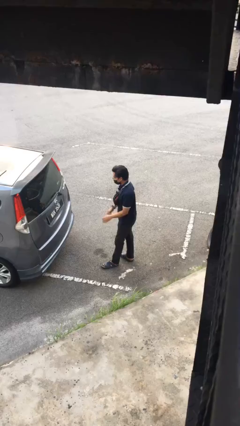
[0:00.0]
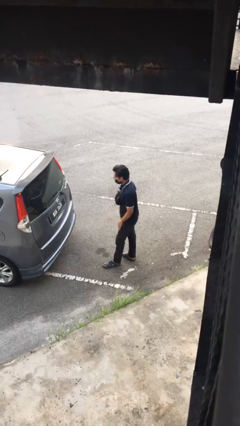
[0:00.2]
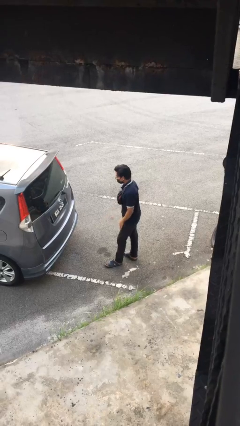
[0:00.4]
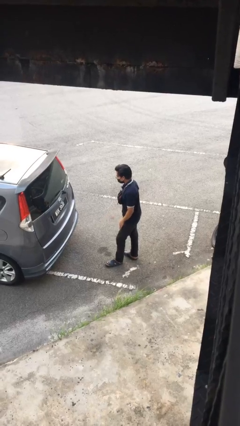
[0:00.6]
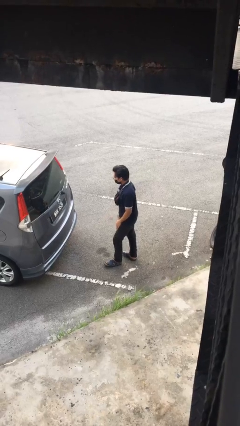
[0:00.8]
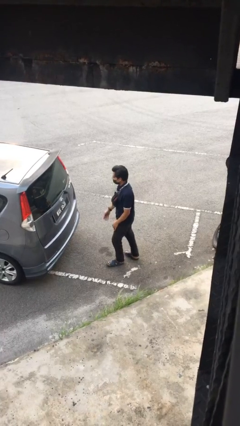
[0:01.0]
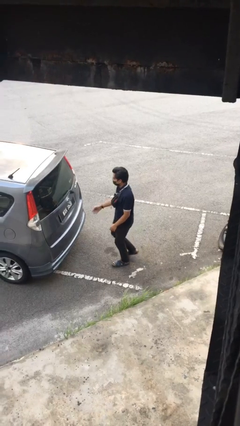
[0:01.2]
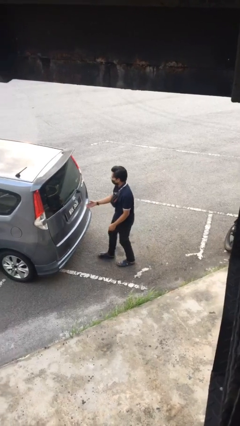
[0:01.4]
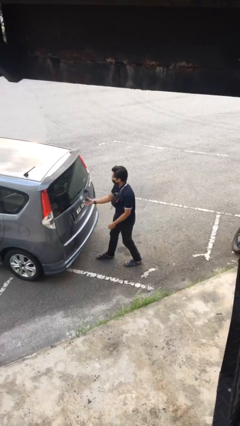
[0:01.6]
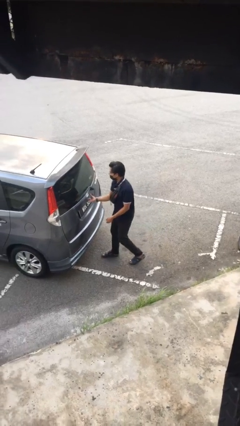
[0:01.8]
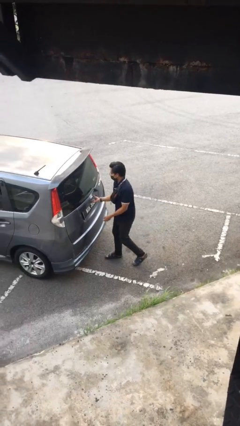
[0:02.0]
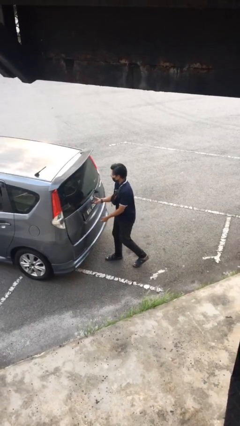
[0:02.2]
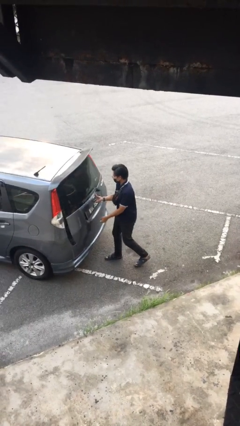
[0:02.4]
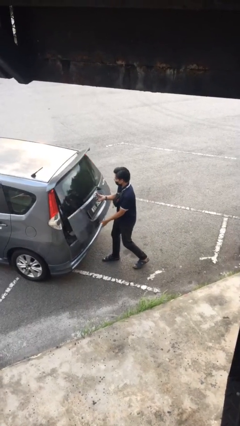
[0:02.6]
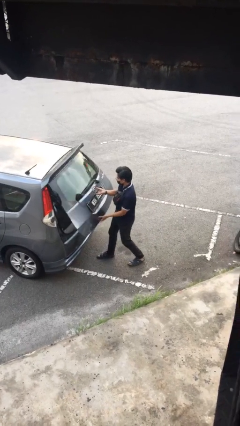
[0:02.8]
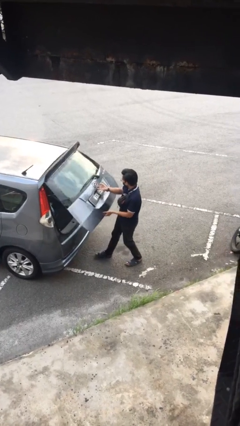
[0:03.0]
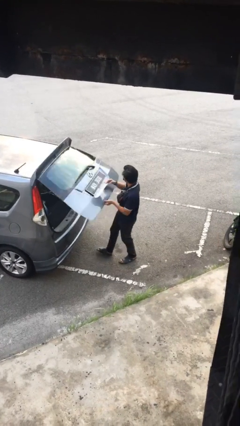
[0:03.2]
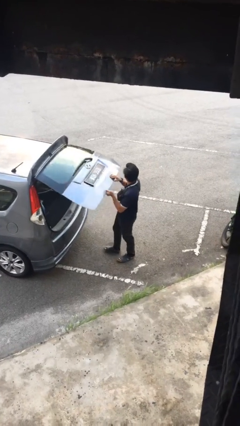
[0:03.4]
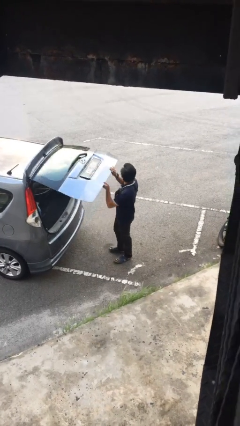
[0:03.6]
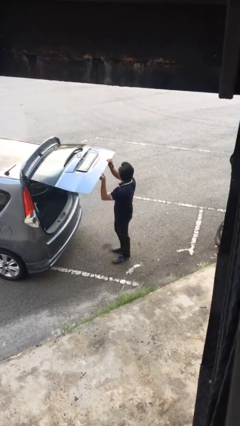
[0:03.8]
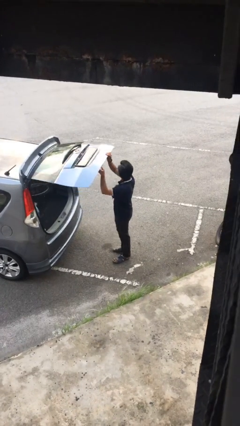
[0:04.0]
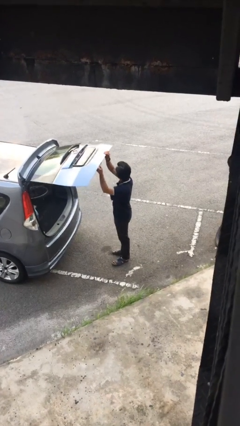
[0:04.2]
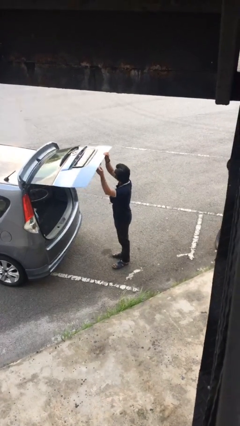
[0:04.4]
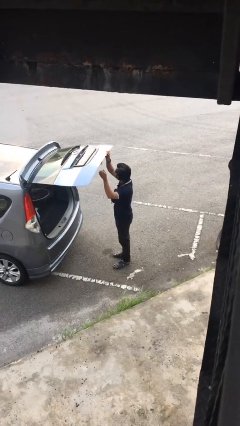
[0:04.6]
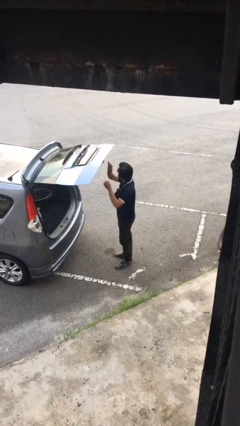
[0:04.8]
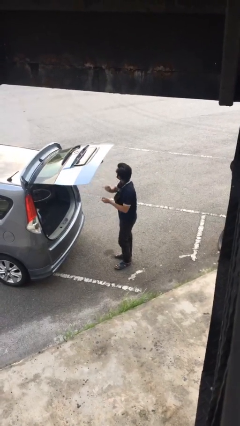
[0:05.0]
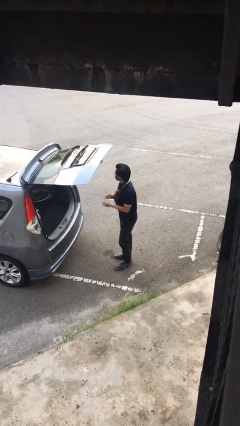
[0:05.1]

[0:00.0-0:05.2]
person opens car trunk

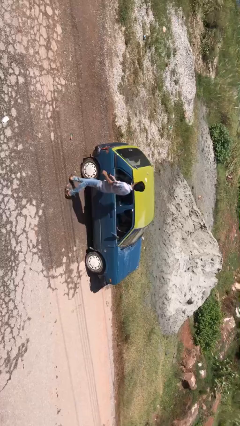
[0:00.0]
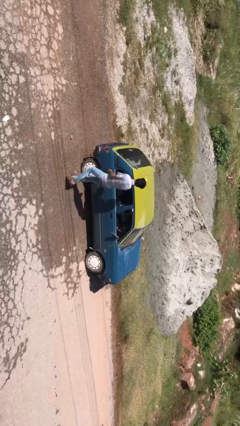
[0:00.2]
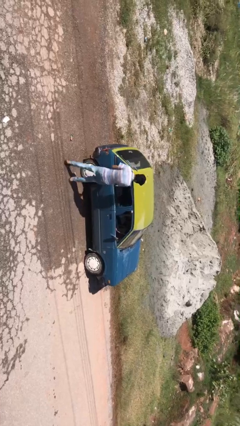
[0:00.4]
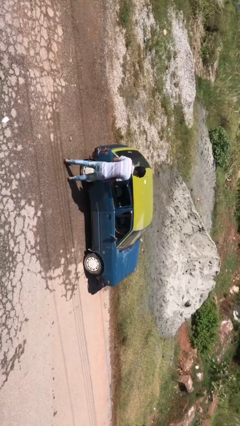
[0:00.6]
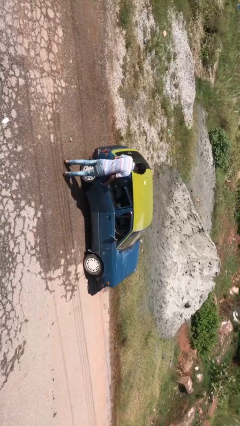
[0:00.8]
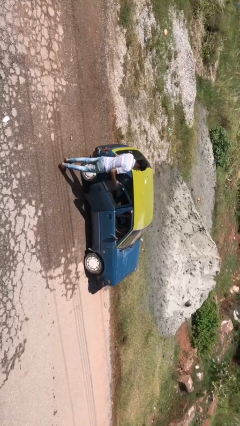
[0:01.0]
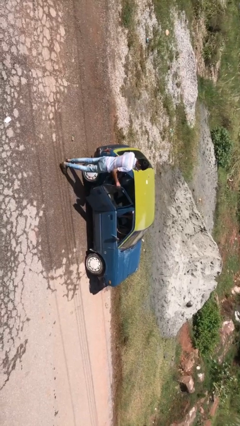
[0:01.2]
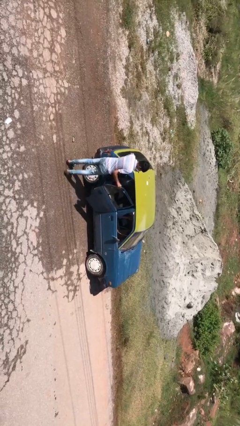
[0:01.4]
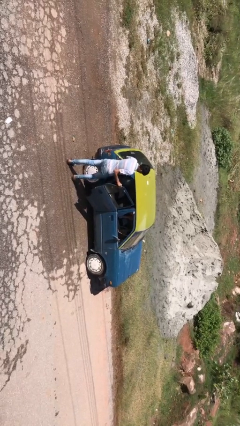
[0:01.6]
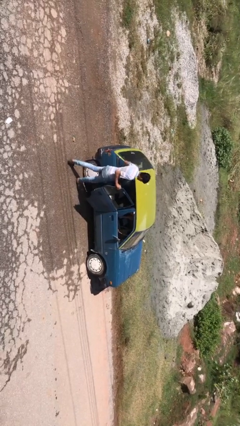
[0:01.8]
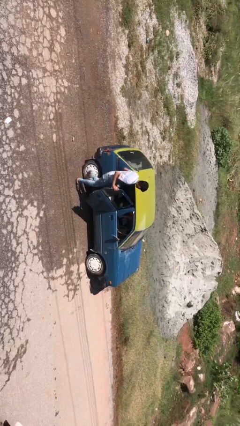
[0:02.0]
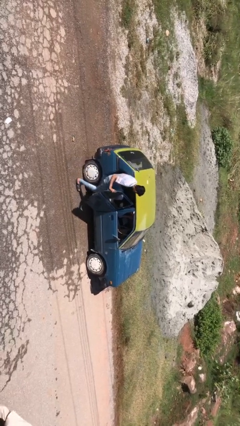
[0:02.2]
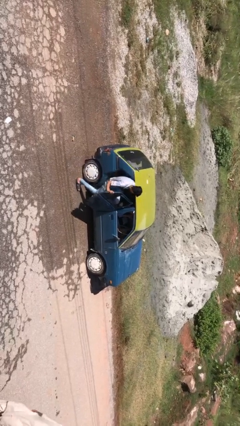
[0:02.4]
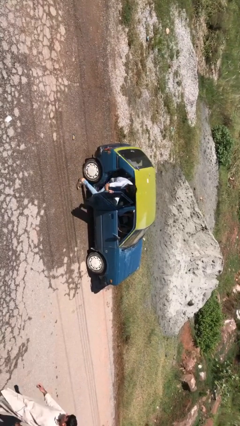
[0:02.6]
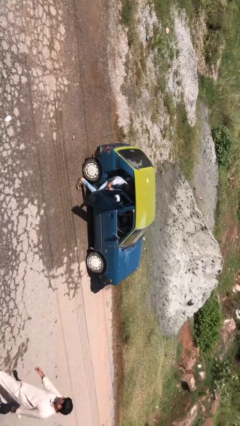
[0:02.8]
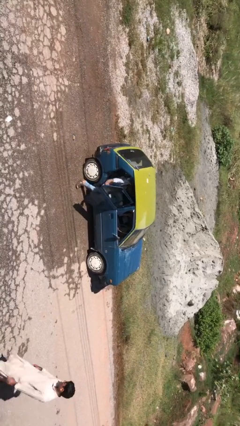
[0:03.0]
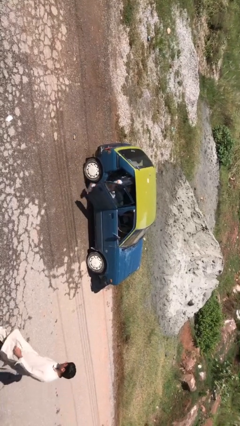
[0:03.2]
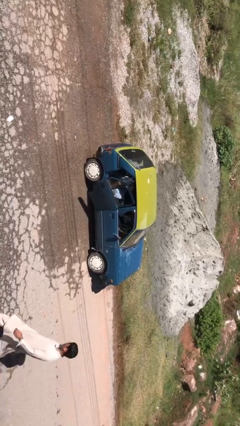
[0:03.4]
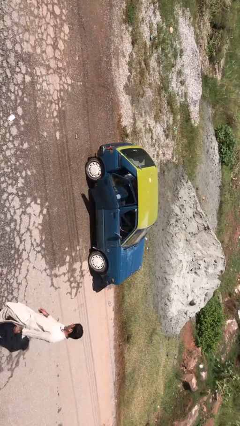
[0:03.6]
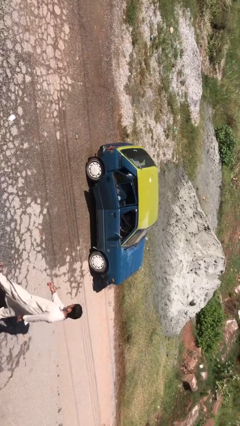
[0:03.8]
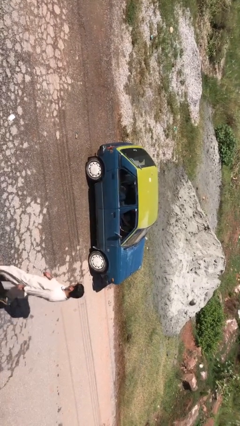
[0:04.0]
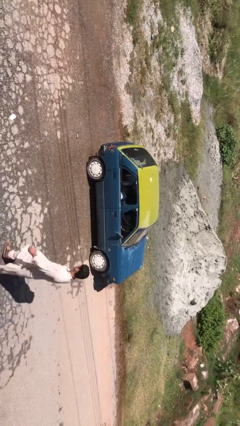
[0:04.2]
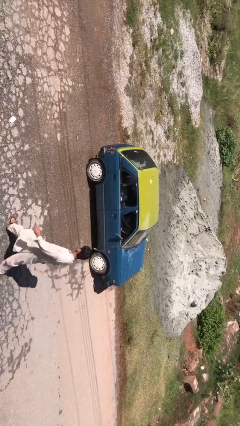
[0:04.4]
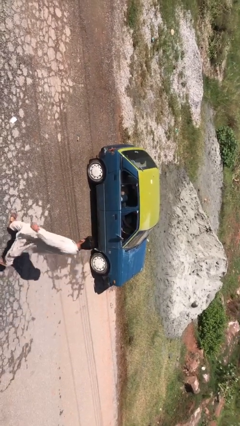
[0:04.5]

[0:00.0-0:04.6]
car picks up person

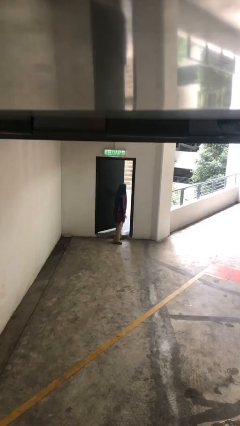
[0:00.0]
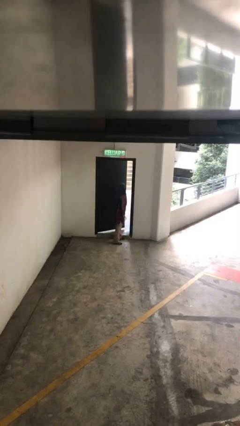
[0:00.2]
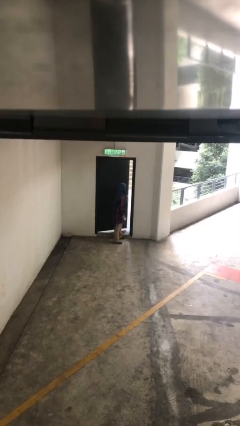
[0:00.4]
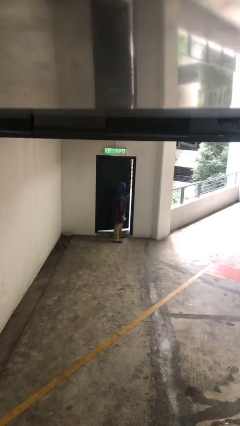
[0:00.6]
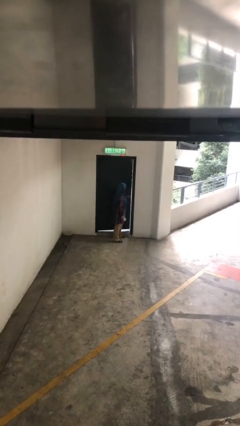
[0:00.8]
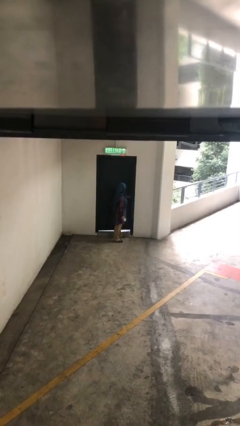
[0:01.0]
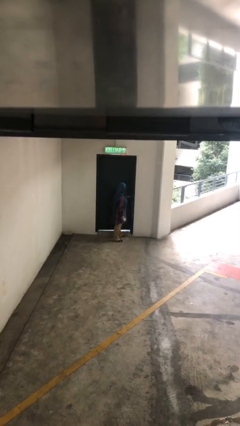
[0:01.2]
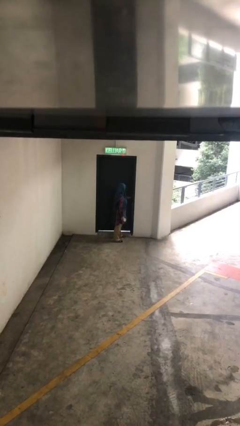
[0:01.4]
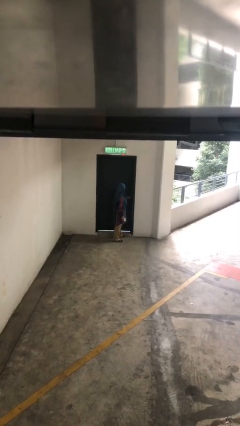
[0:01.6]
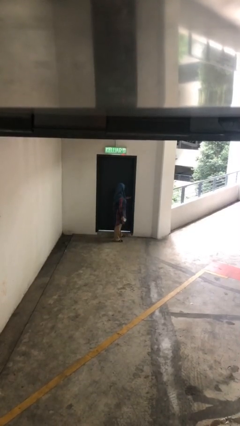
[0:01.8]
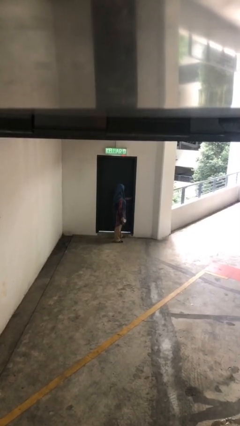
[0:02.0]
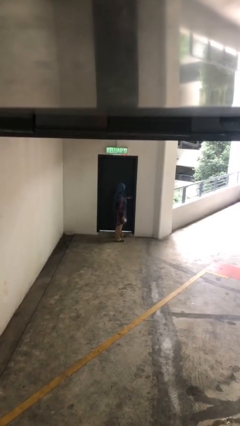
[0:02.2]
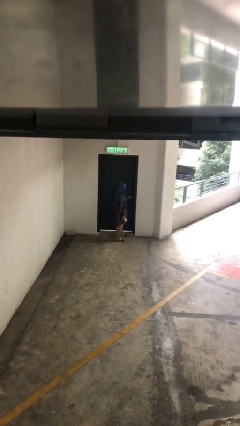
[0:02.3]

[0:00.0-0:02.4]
person closes facility door

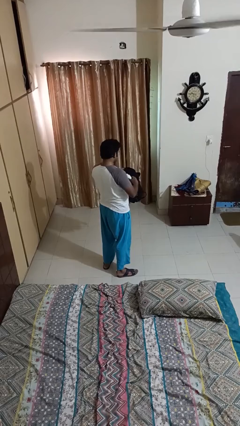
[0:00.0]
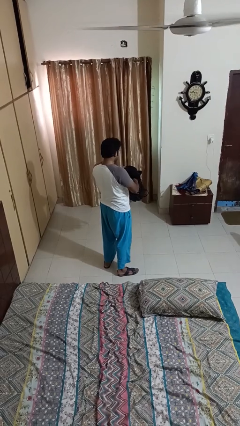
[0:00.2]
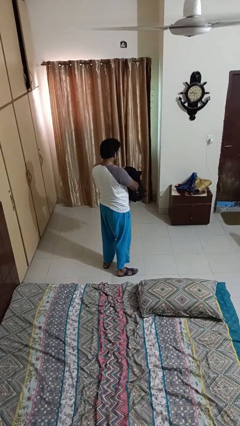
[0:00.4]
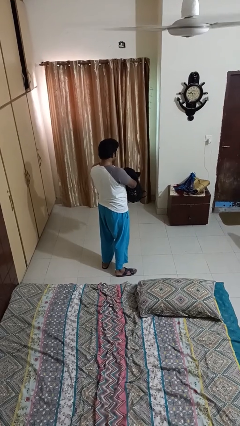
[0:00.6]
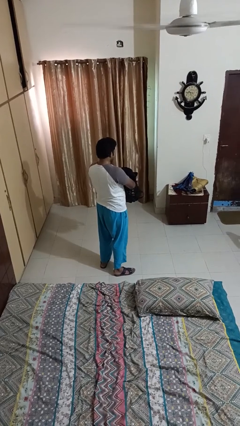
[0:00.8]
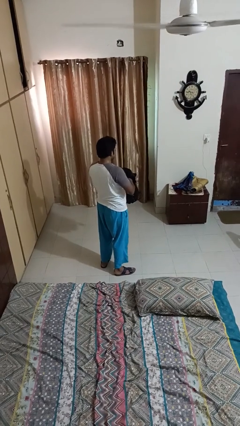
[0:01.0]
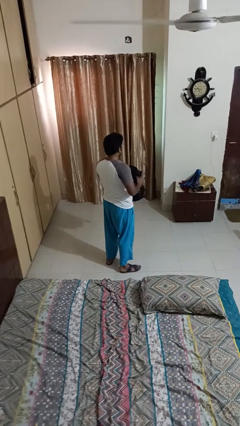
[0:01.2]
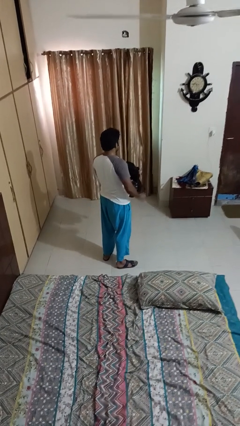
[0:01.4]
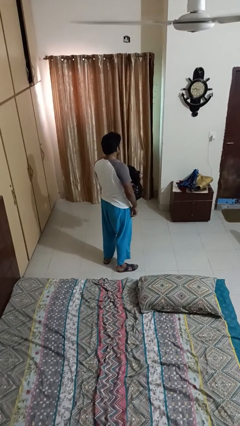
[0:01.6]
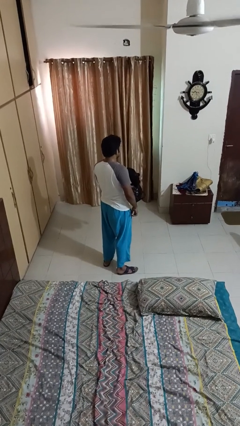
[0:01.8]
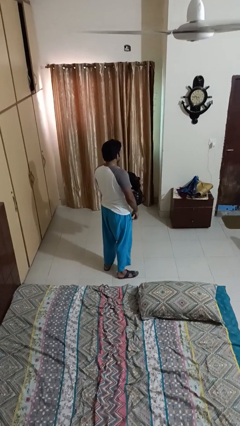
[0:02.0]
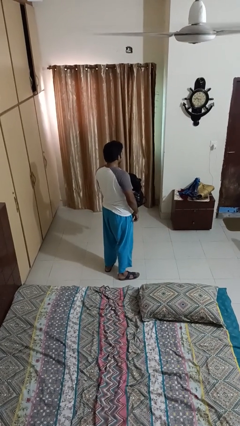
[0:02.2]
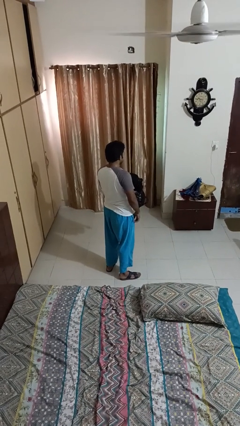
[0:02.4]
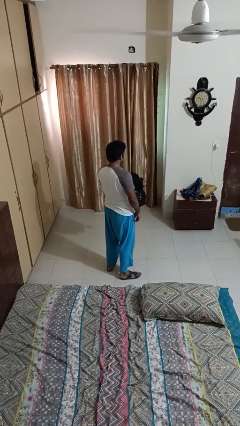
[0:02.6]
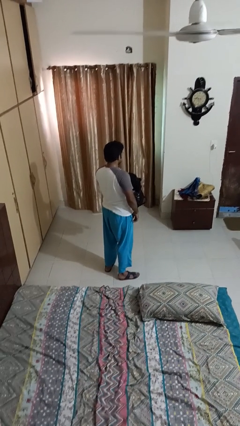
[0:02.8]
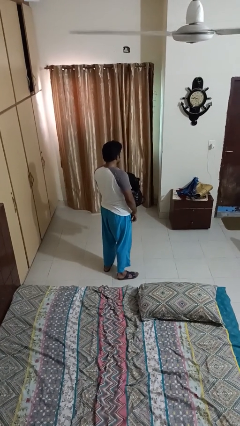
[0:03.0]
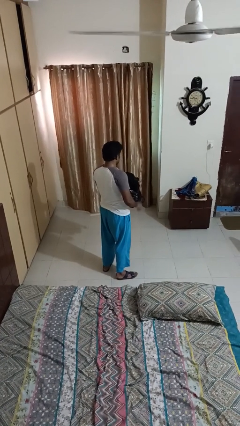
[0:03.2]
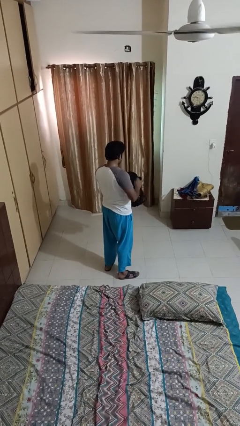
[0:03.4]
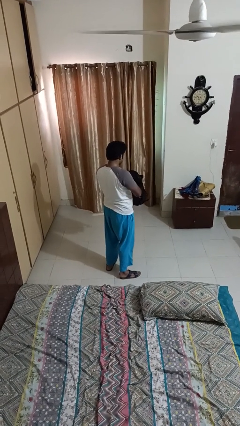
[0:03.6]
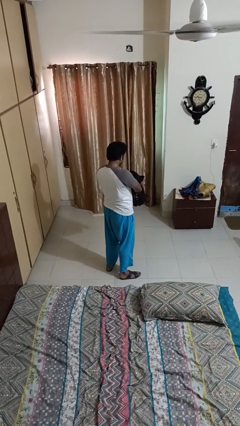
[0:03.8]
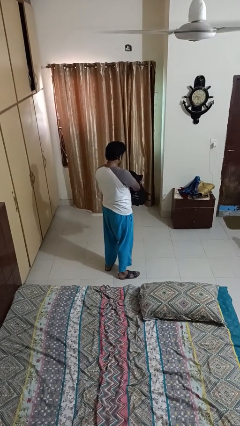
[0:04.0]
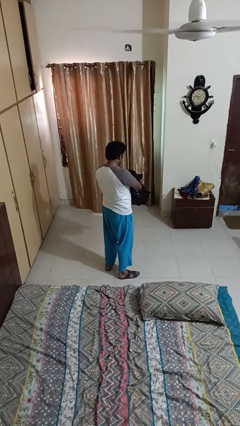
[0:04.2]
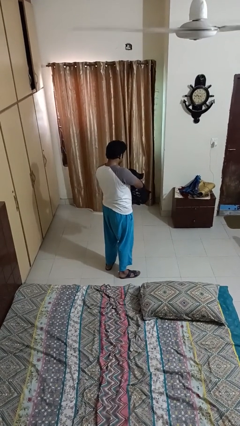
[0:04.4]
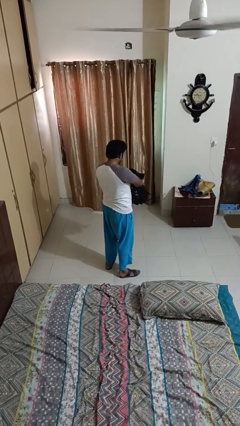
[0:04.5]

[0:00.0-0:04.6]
person stands up

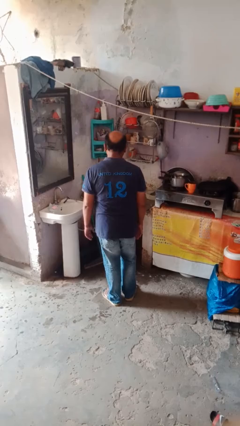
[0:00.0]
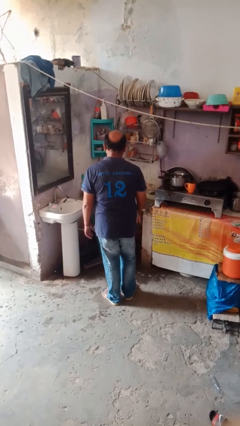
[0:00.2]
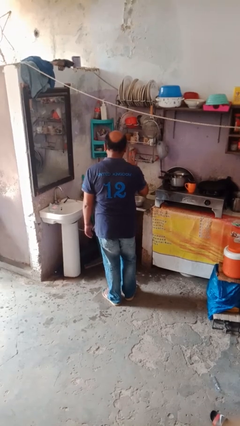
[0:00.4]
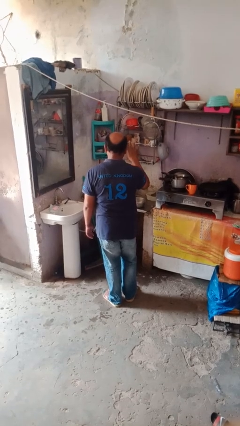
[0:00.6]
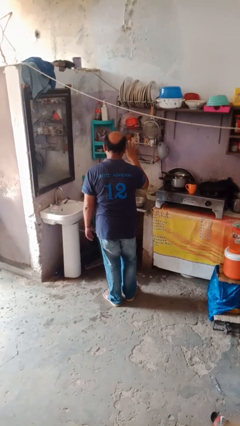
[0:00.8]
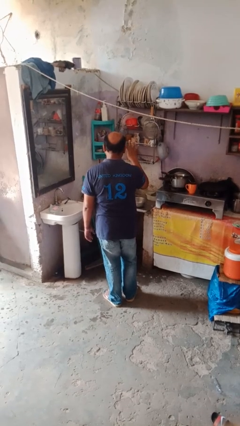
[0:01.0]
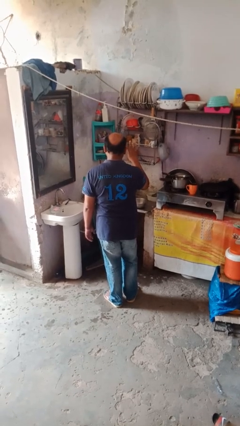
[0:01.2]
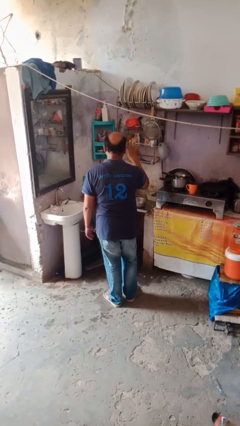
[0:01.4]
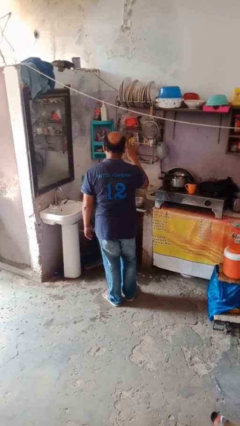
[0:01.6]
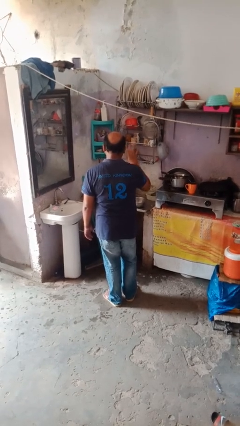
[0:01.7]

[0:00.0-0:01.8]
person gestures number four
